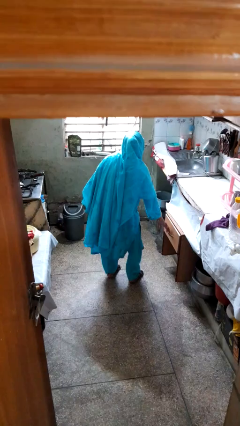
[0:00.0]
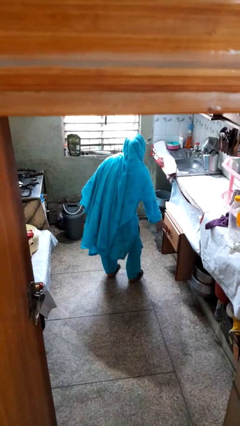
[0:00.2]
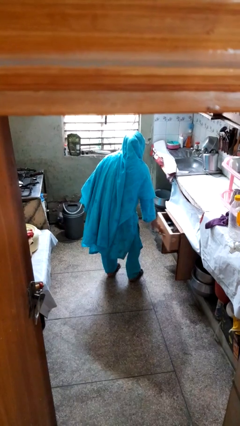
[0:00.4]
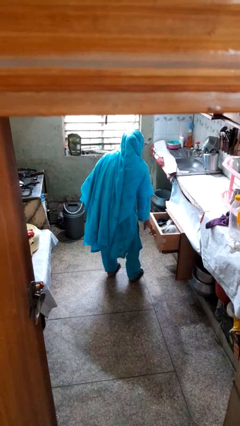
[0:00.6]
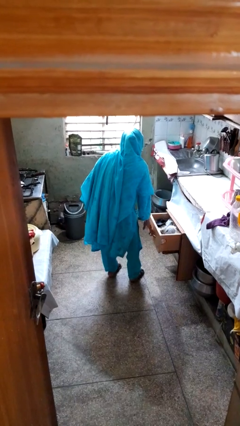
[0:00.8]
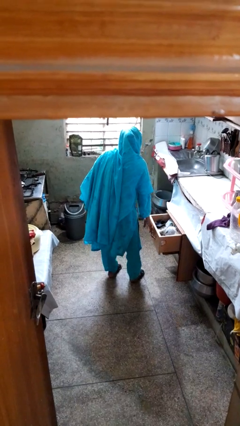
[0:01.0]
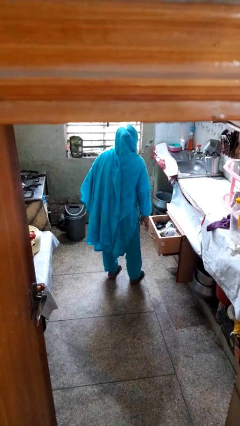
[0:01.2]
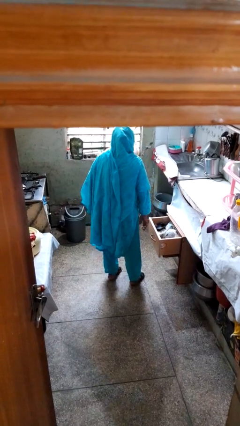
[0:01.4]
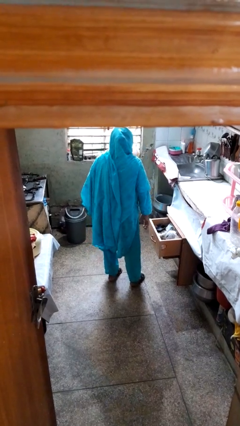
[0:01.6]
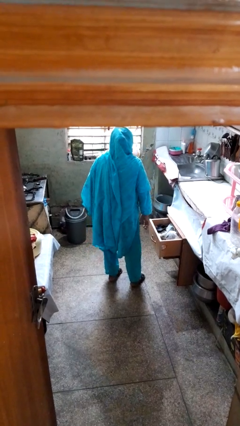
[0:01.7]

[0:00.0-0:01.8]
person opens kitchen drawer

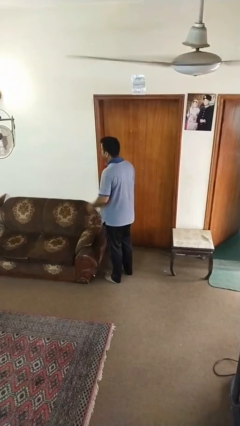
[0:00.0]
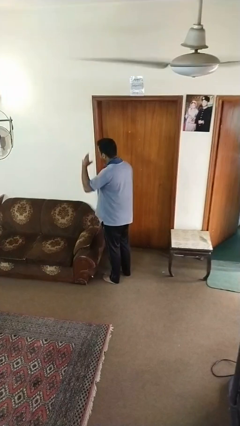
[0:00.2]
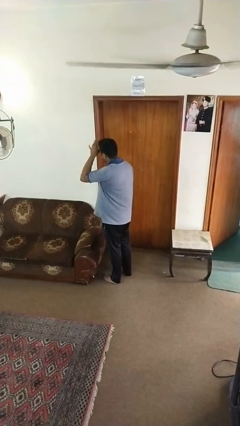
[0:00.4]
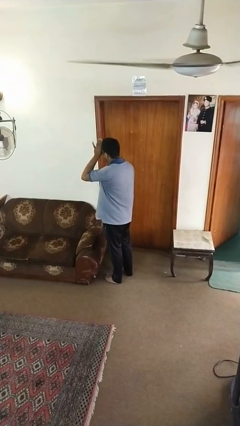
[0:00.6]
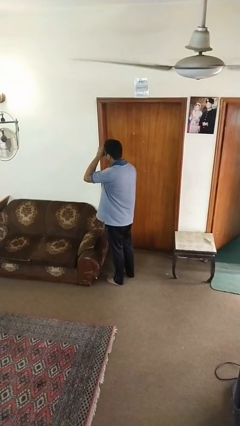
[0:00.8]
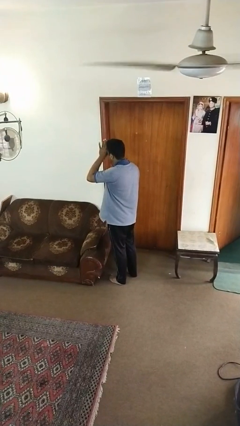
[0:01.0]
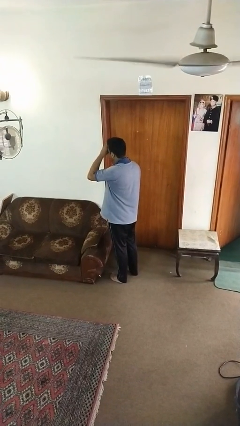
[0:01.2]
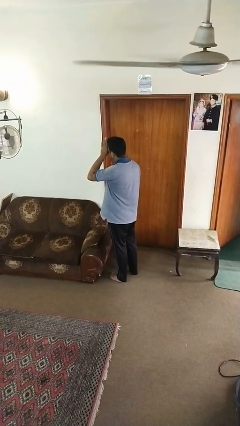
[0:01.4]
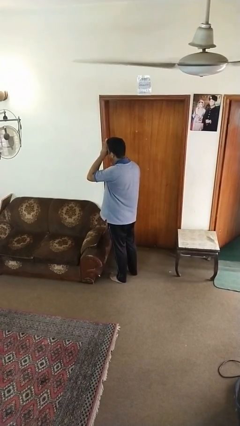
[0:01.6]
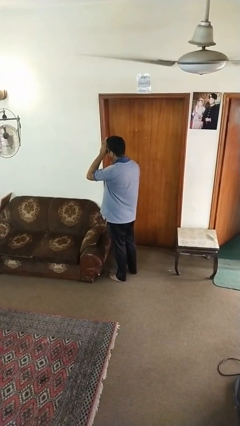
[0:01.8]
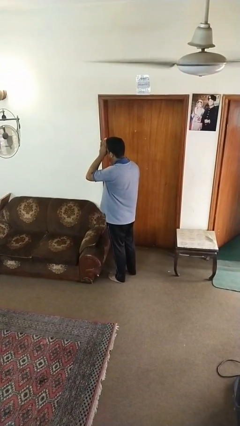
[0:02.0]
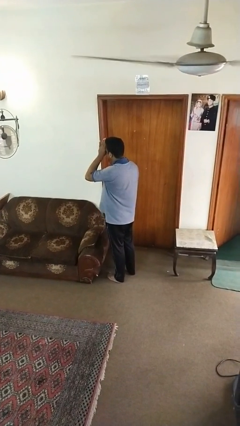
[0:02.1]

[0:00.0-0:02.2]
person rubs eyes

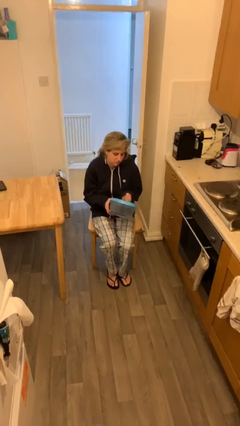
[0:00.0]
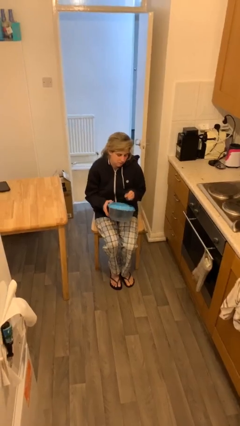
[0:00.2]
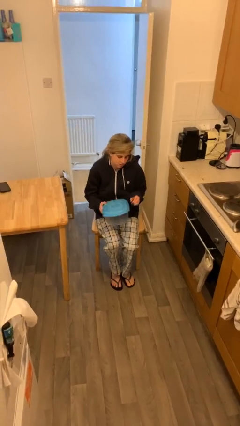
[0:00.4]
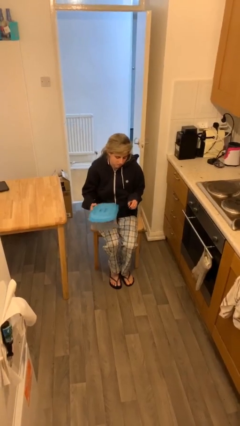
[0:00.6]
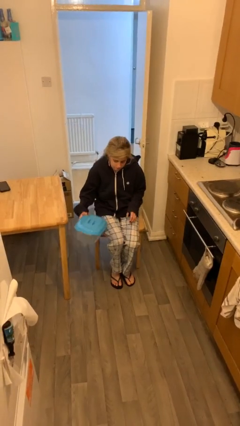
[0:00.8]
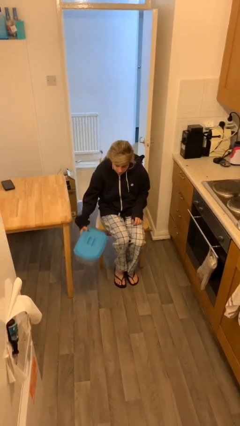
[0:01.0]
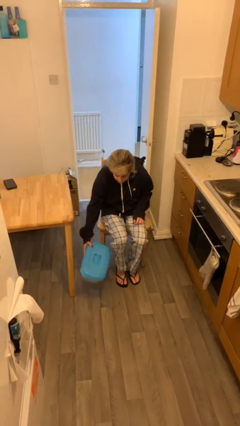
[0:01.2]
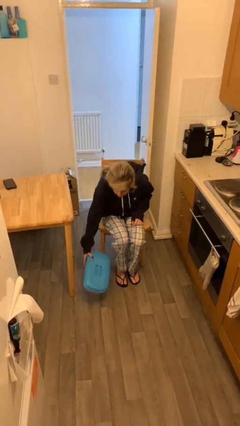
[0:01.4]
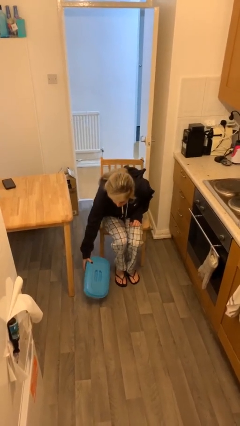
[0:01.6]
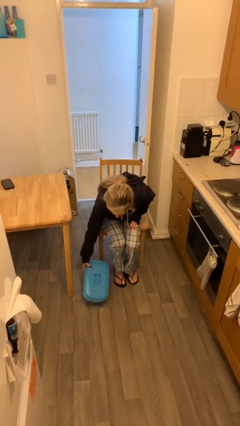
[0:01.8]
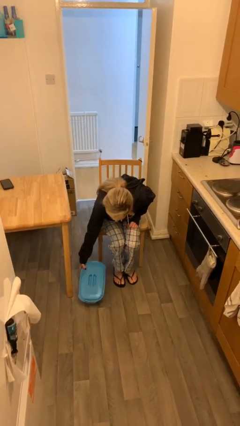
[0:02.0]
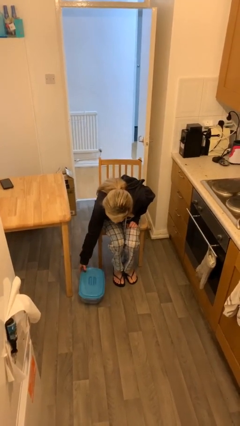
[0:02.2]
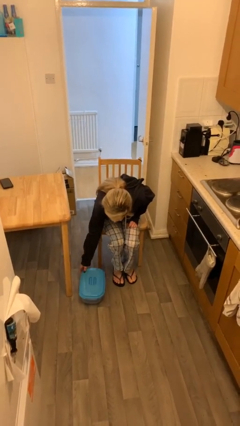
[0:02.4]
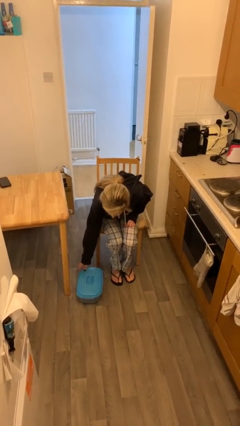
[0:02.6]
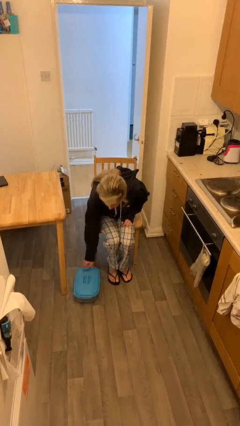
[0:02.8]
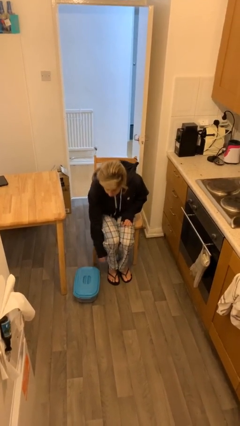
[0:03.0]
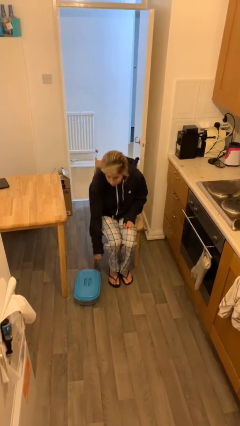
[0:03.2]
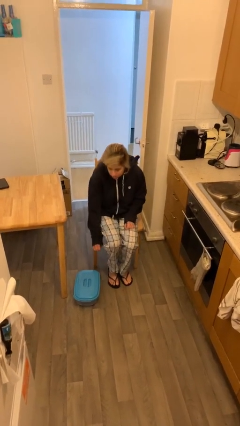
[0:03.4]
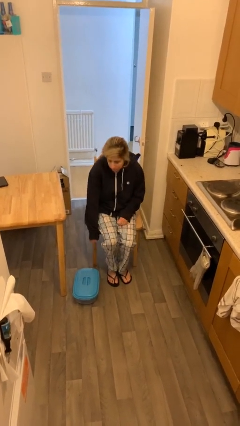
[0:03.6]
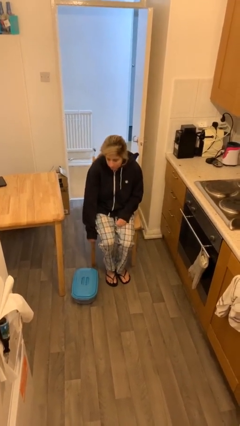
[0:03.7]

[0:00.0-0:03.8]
person puts down object on floor

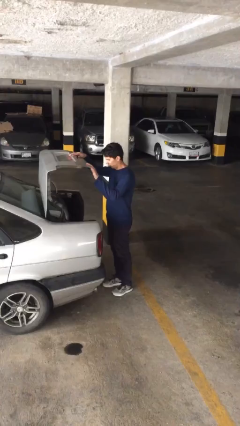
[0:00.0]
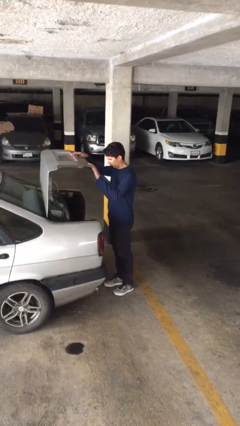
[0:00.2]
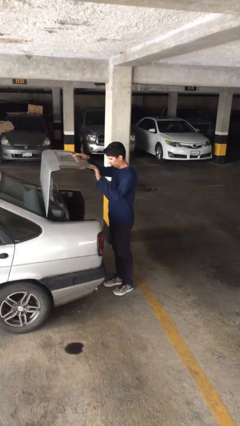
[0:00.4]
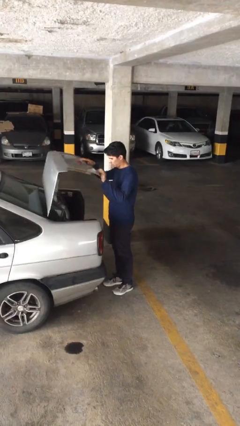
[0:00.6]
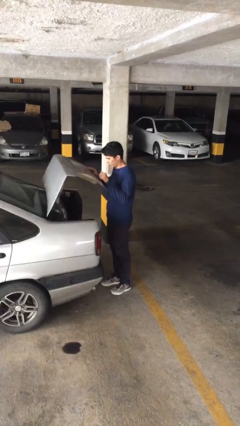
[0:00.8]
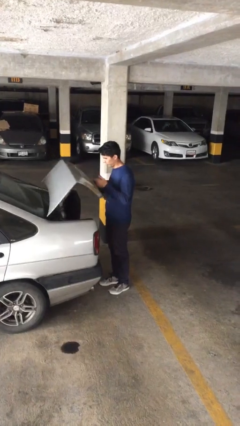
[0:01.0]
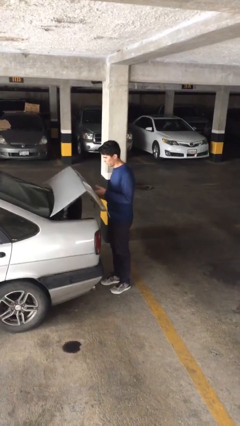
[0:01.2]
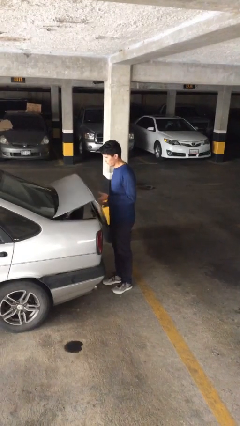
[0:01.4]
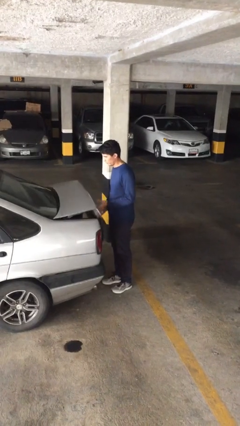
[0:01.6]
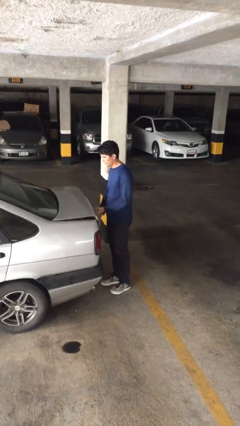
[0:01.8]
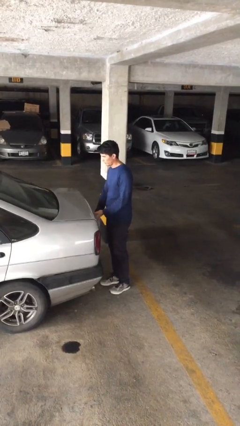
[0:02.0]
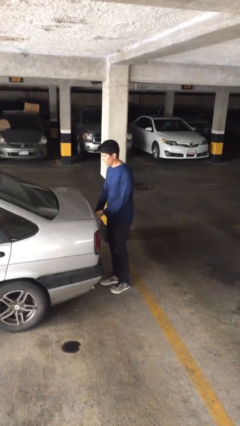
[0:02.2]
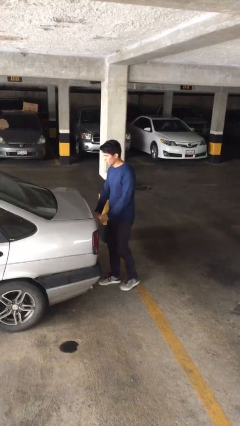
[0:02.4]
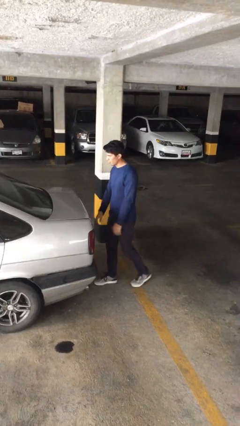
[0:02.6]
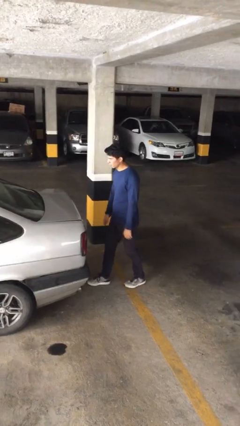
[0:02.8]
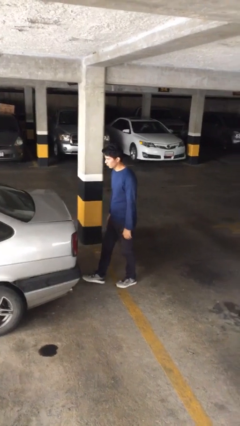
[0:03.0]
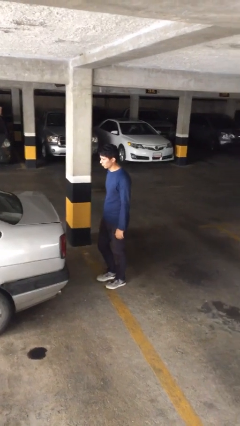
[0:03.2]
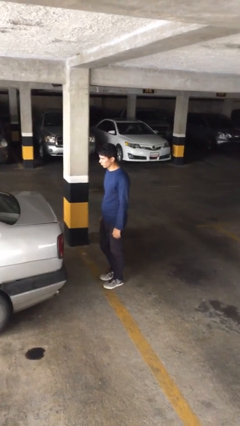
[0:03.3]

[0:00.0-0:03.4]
person closes car trunk

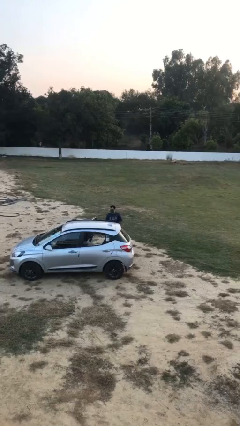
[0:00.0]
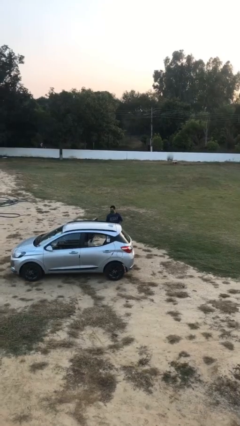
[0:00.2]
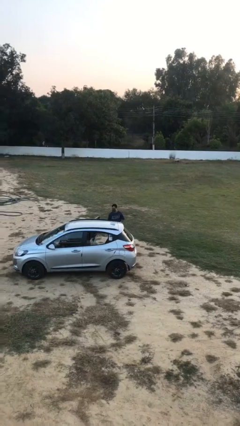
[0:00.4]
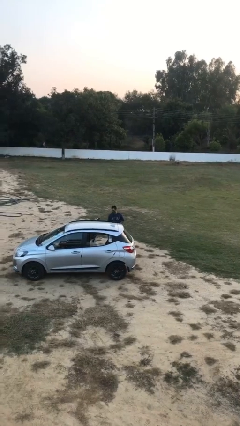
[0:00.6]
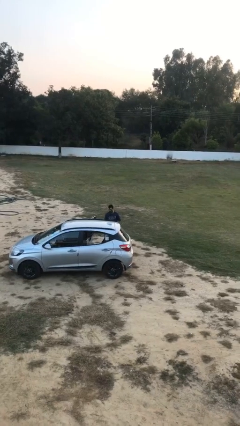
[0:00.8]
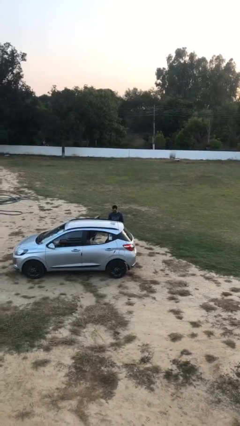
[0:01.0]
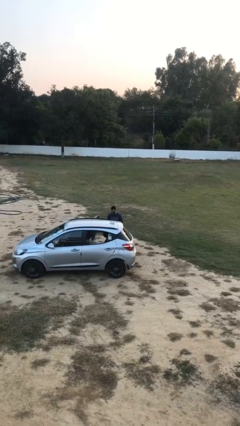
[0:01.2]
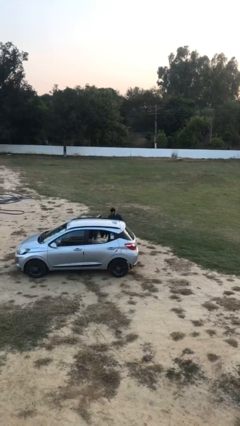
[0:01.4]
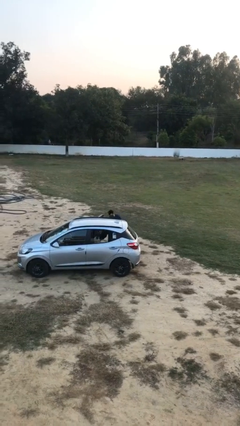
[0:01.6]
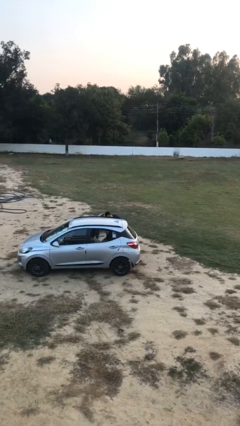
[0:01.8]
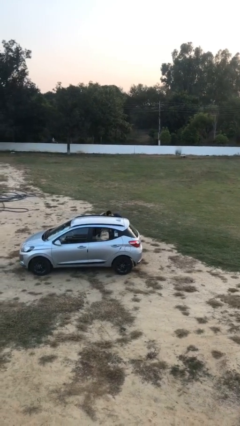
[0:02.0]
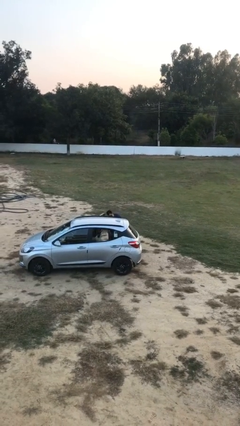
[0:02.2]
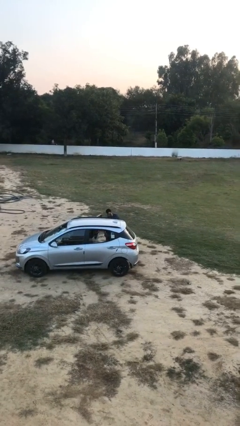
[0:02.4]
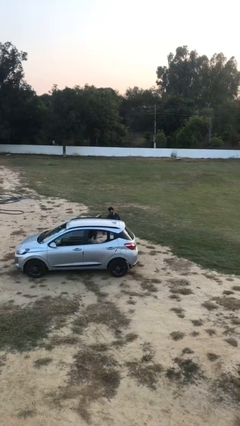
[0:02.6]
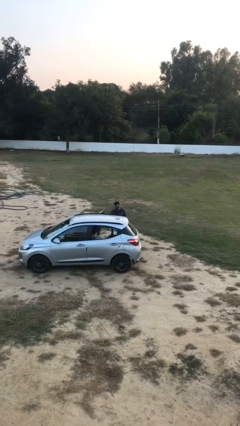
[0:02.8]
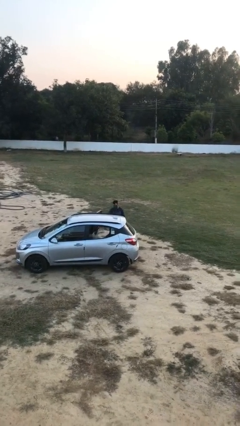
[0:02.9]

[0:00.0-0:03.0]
person loads car

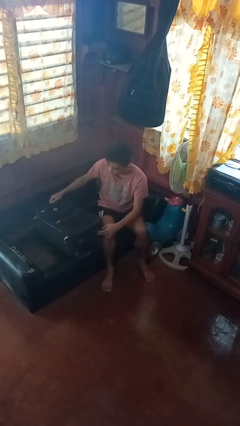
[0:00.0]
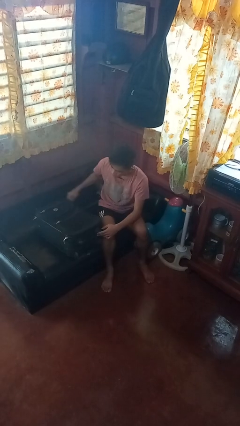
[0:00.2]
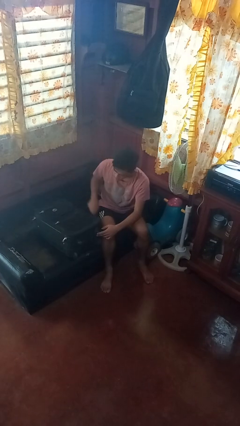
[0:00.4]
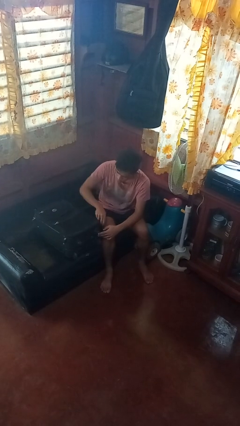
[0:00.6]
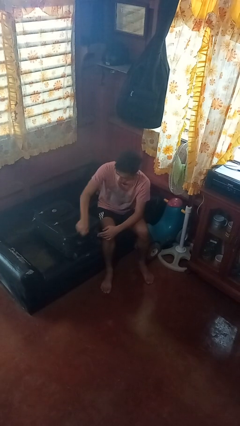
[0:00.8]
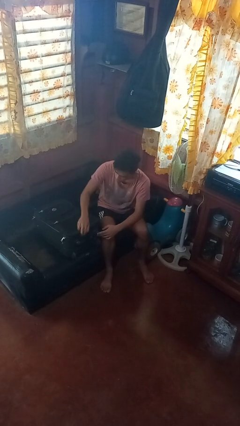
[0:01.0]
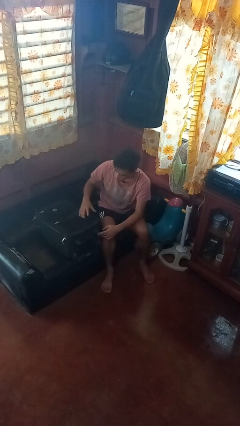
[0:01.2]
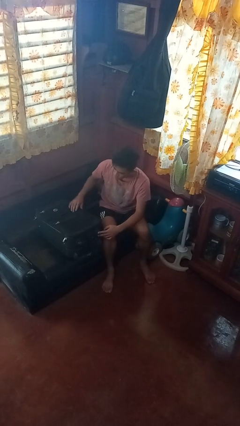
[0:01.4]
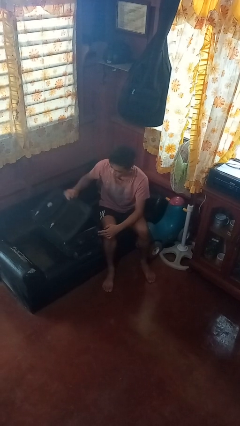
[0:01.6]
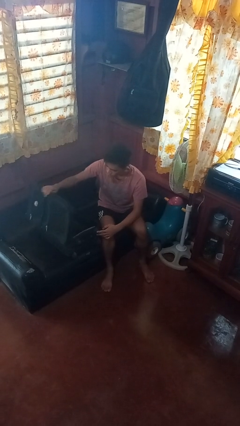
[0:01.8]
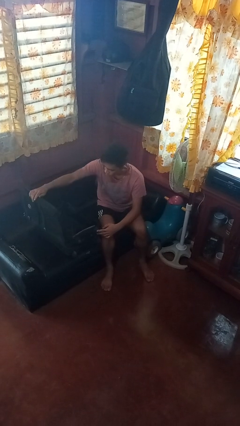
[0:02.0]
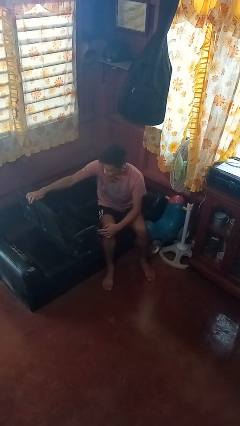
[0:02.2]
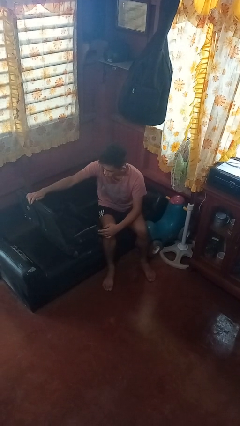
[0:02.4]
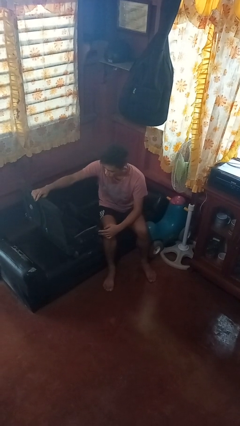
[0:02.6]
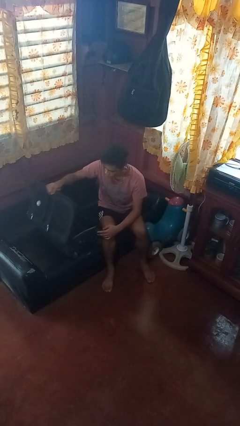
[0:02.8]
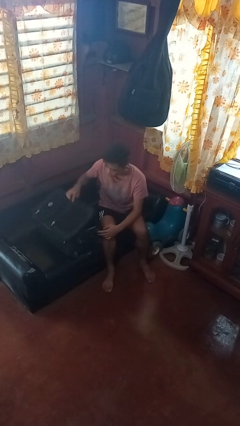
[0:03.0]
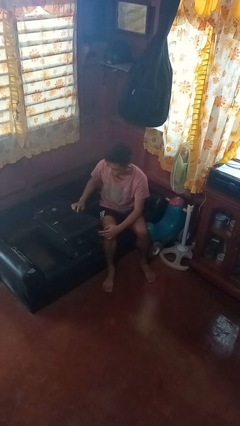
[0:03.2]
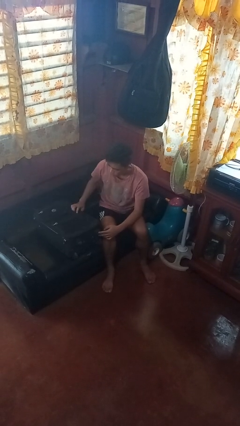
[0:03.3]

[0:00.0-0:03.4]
person opens suitcase
